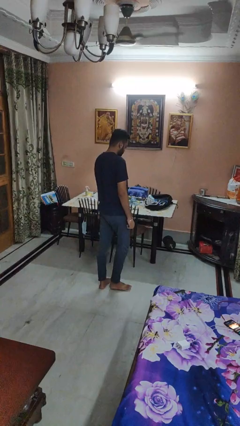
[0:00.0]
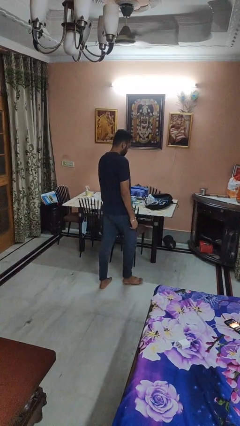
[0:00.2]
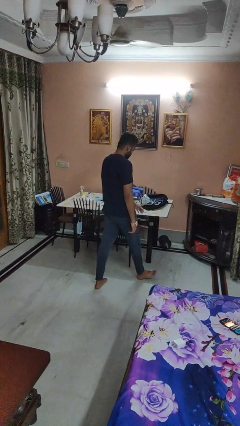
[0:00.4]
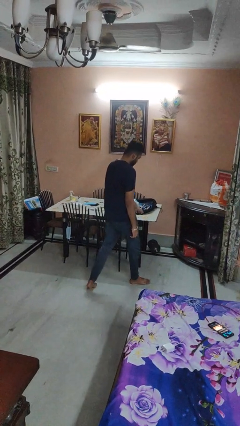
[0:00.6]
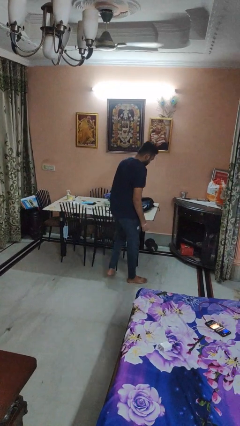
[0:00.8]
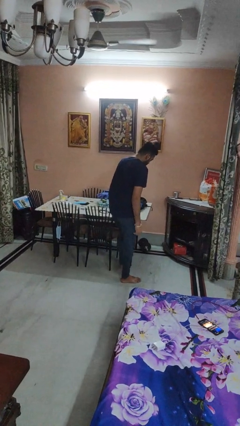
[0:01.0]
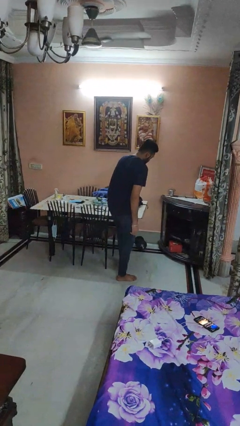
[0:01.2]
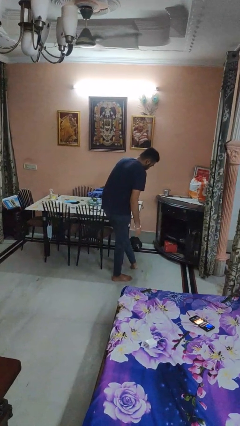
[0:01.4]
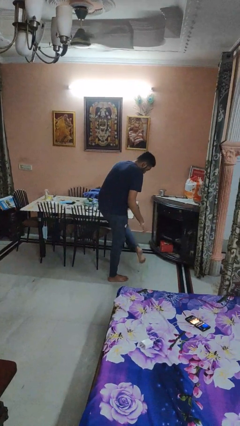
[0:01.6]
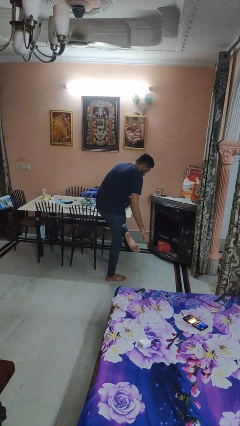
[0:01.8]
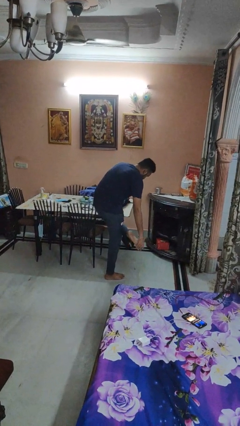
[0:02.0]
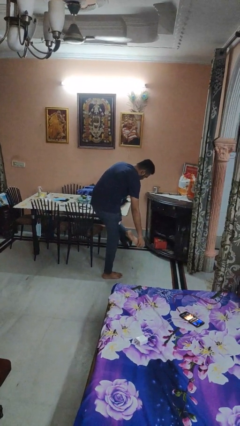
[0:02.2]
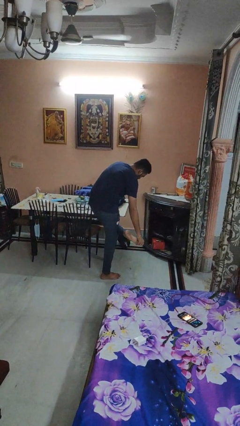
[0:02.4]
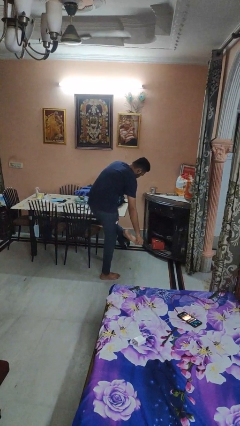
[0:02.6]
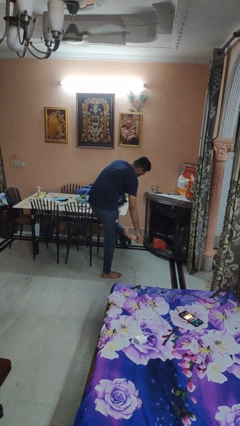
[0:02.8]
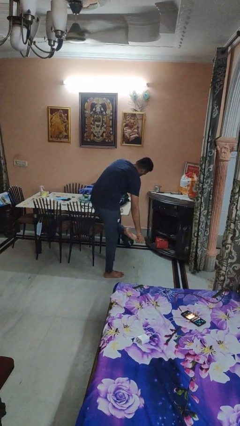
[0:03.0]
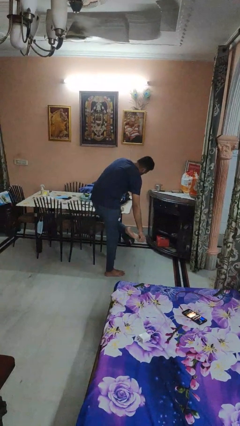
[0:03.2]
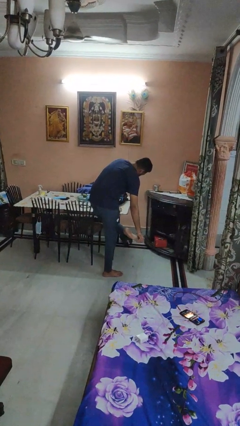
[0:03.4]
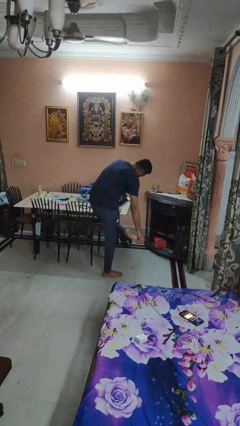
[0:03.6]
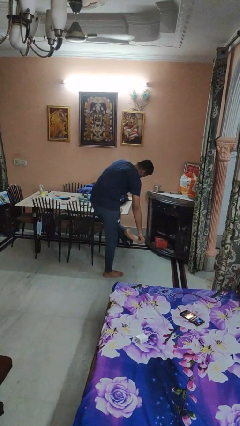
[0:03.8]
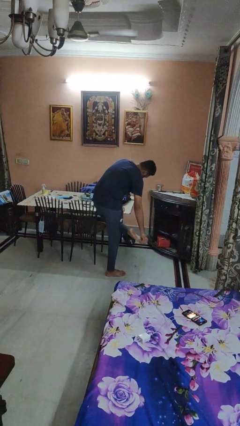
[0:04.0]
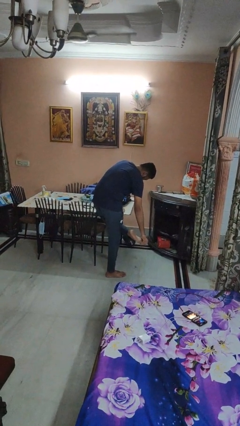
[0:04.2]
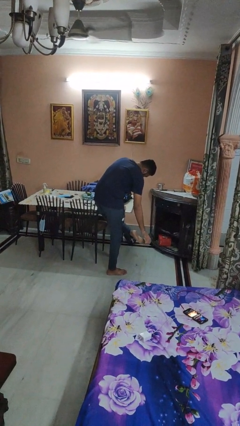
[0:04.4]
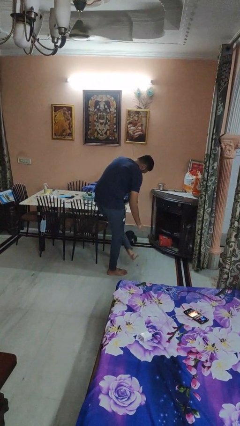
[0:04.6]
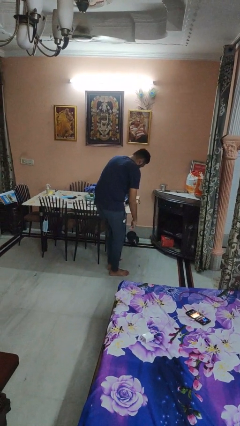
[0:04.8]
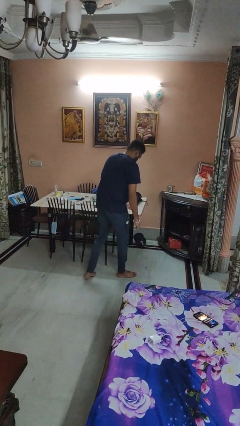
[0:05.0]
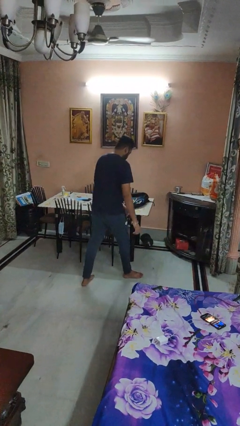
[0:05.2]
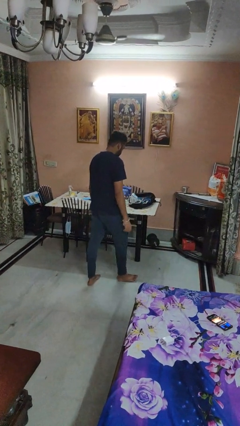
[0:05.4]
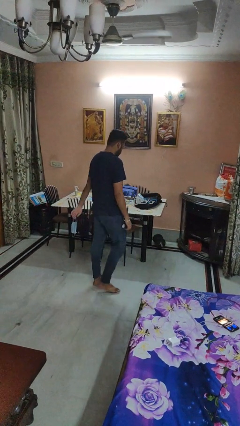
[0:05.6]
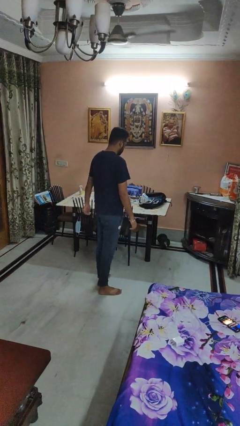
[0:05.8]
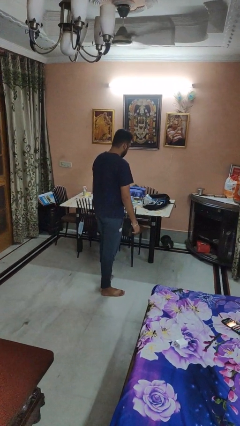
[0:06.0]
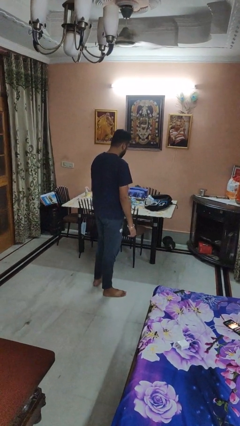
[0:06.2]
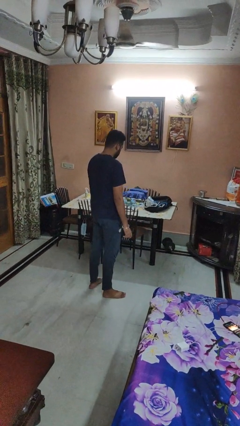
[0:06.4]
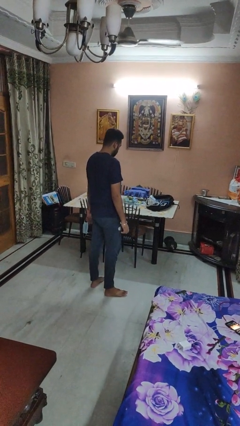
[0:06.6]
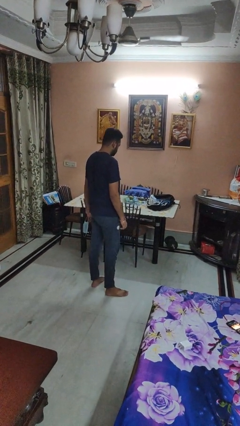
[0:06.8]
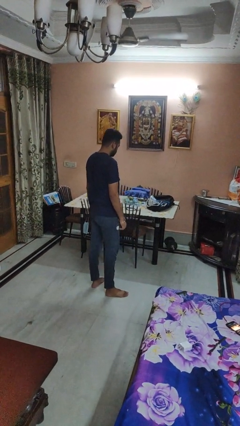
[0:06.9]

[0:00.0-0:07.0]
person bumps into table

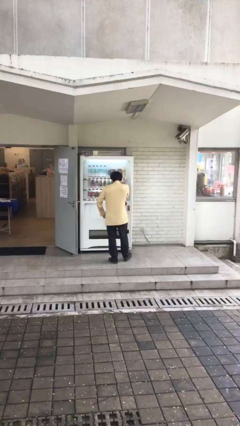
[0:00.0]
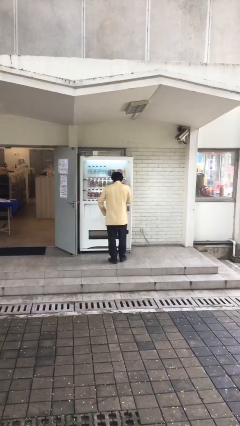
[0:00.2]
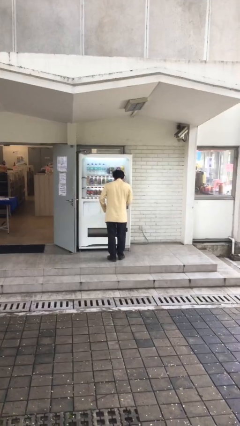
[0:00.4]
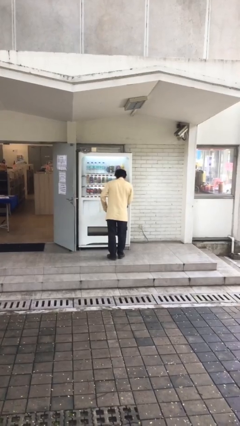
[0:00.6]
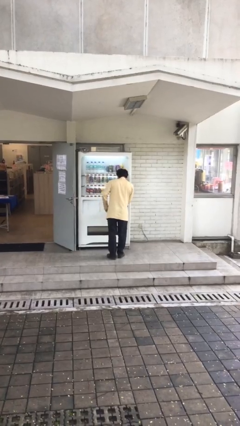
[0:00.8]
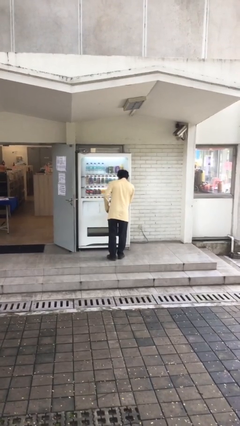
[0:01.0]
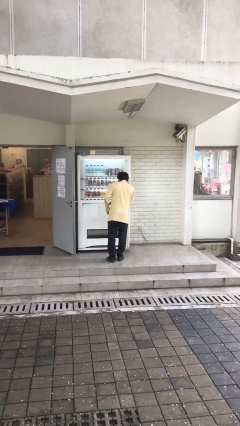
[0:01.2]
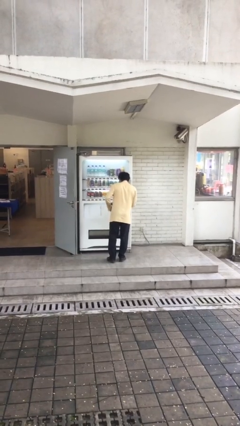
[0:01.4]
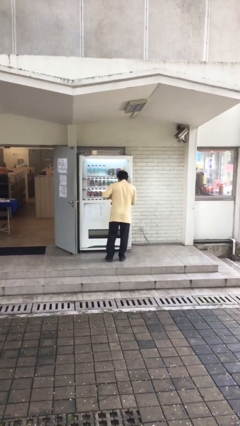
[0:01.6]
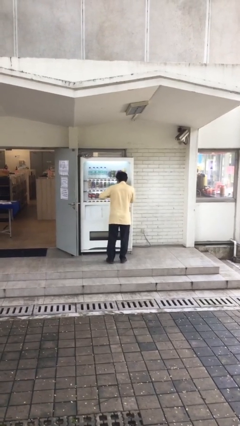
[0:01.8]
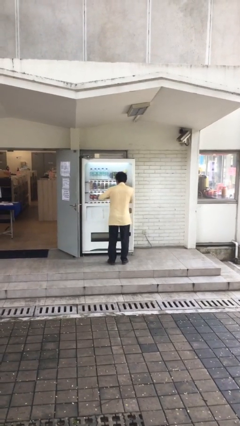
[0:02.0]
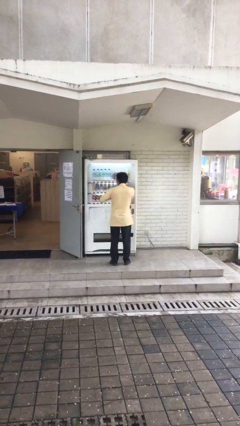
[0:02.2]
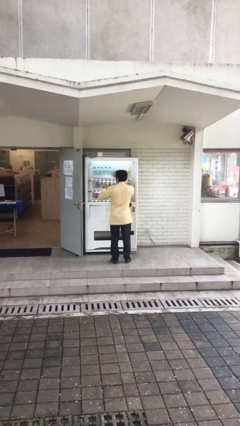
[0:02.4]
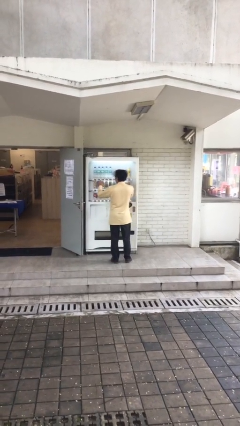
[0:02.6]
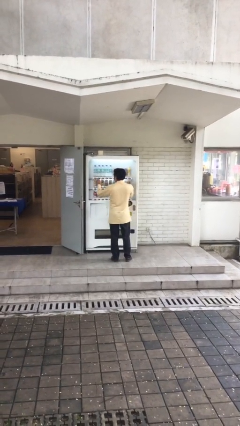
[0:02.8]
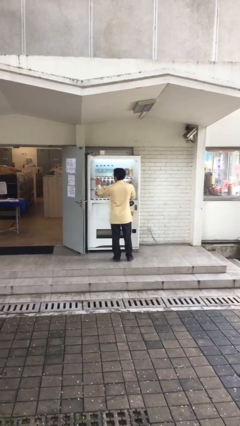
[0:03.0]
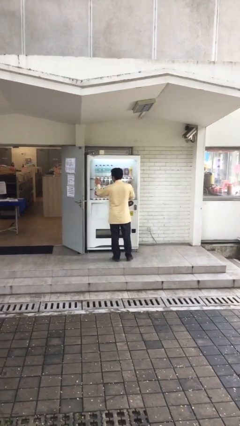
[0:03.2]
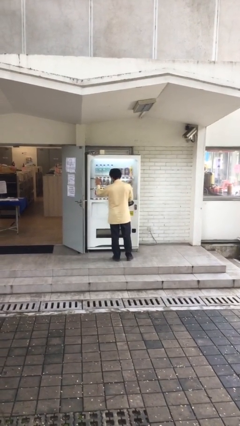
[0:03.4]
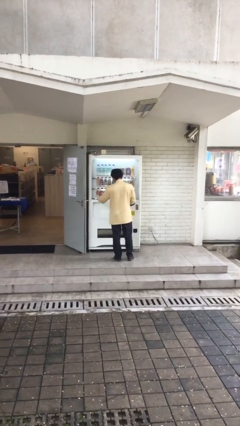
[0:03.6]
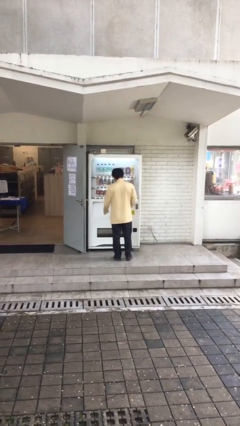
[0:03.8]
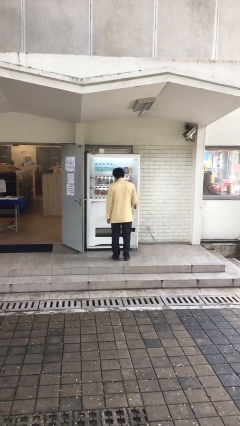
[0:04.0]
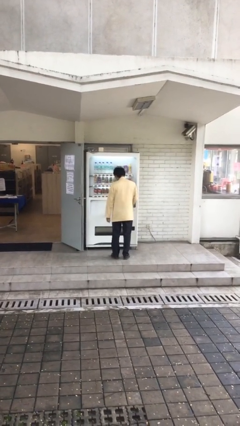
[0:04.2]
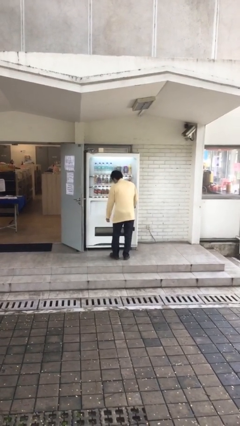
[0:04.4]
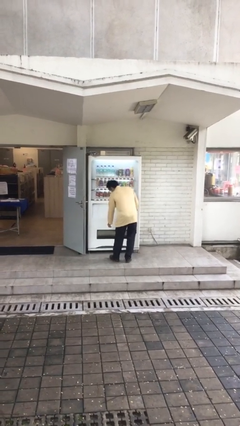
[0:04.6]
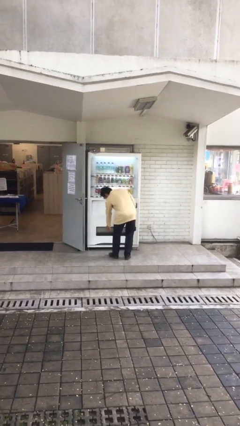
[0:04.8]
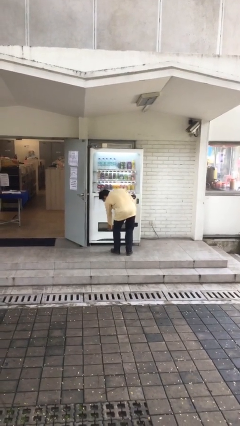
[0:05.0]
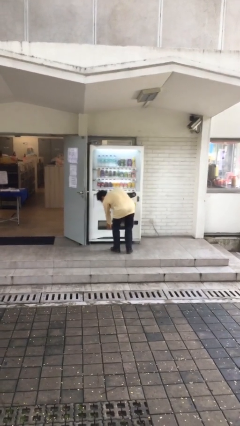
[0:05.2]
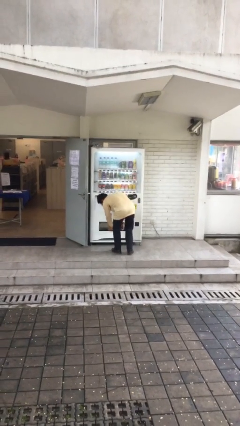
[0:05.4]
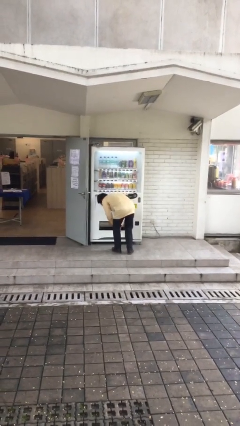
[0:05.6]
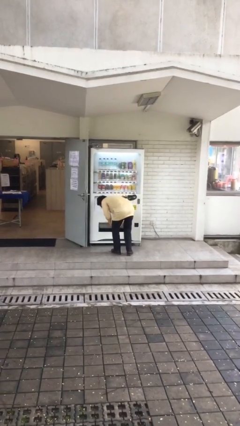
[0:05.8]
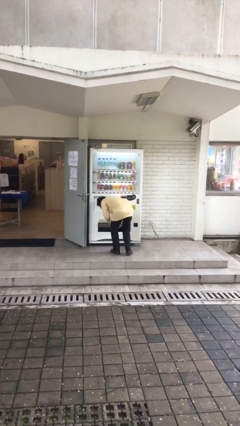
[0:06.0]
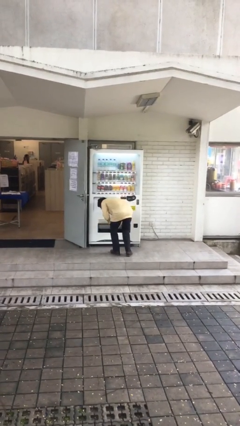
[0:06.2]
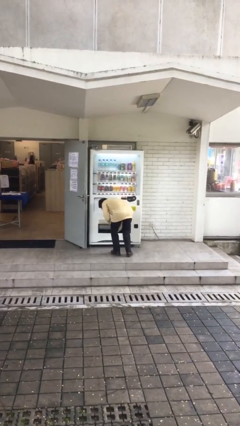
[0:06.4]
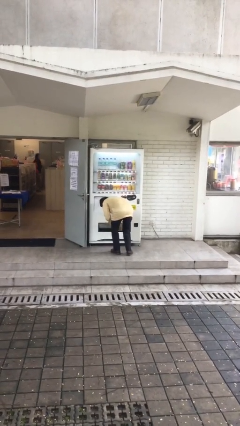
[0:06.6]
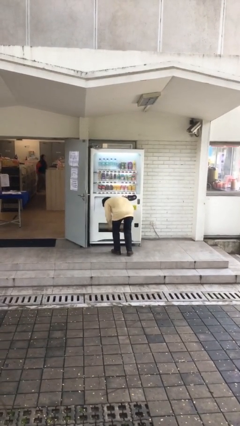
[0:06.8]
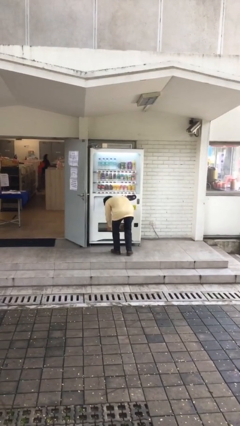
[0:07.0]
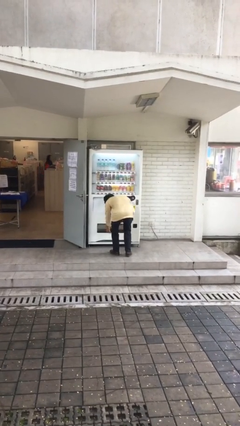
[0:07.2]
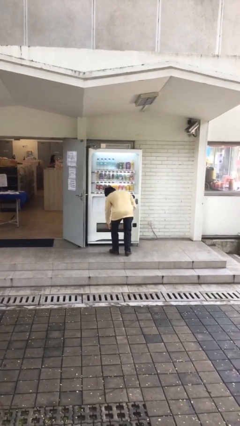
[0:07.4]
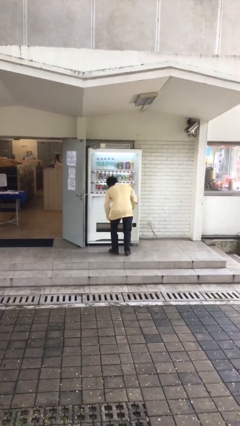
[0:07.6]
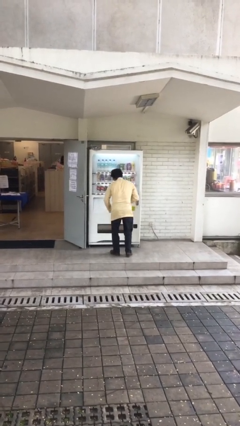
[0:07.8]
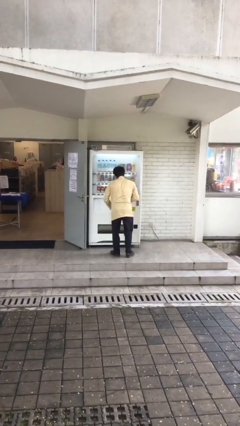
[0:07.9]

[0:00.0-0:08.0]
person purchases from machine

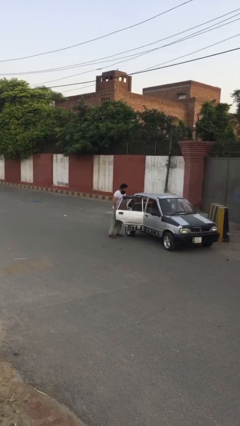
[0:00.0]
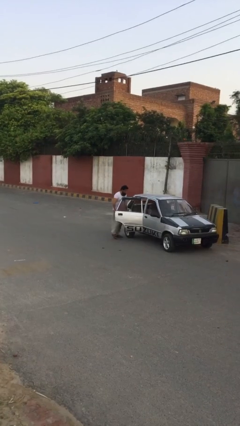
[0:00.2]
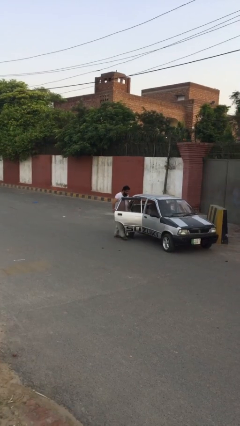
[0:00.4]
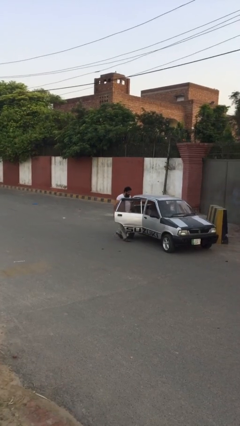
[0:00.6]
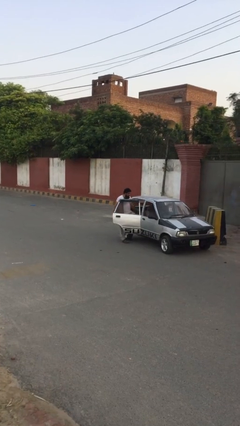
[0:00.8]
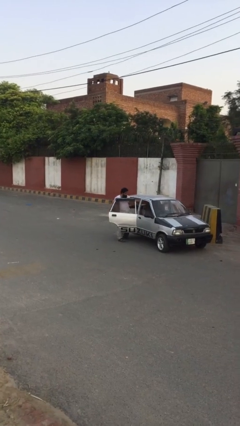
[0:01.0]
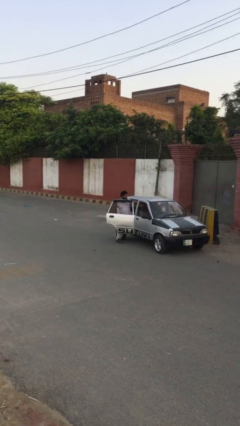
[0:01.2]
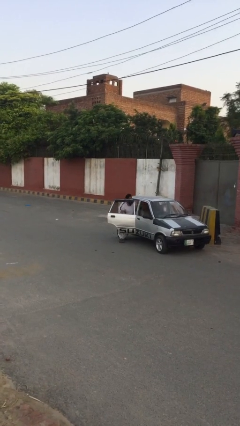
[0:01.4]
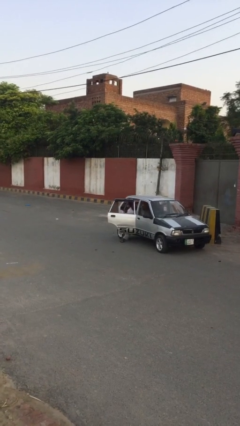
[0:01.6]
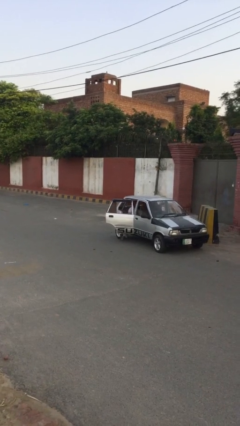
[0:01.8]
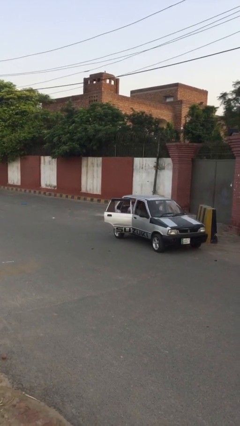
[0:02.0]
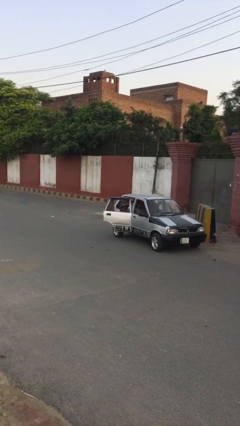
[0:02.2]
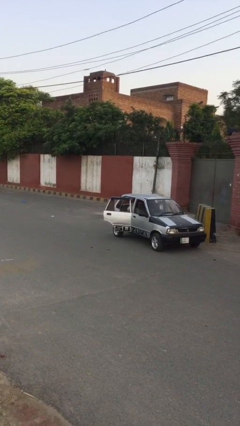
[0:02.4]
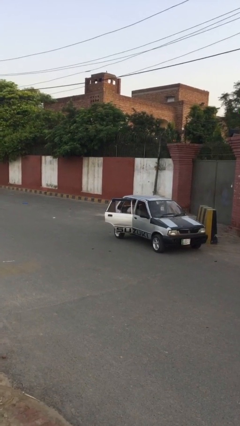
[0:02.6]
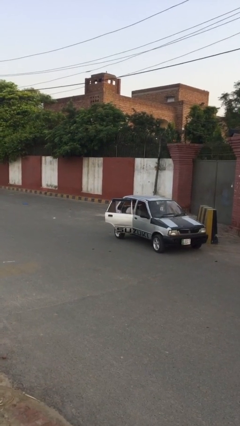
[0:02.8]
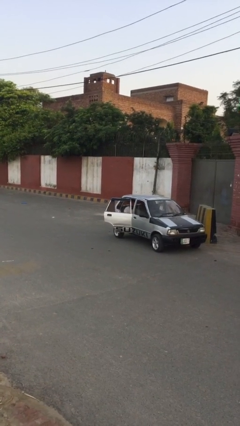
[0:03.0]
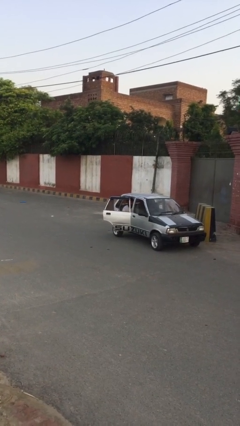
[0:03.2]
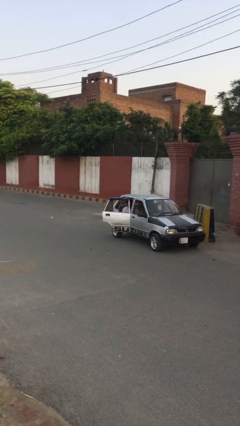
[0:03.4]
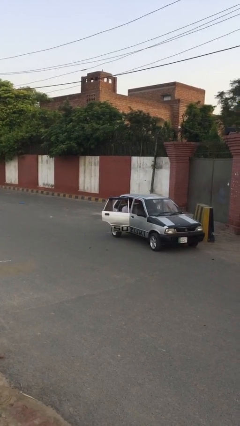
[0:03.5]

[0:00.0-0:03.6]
person enters car
